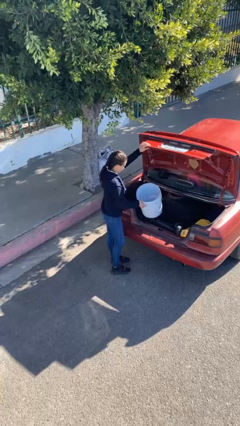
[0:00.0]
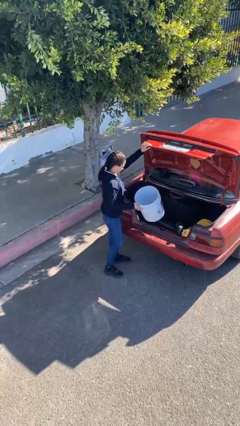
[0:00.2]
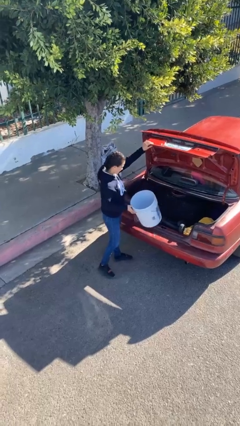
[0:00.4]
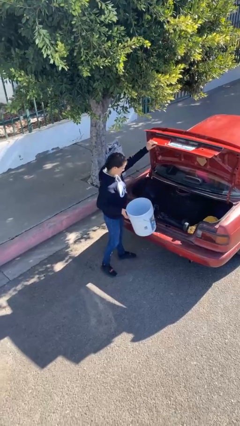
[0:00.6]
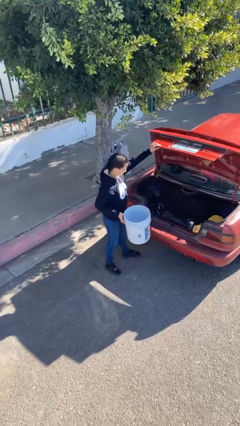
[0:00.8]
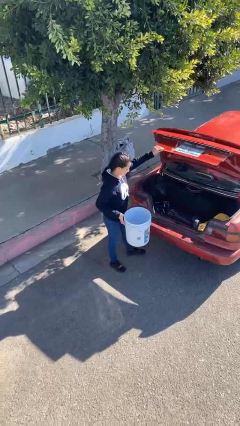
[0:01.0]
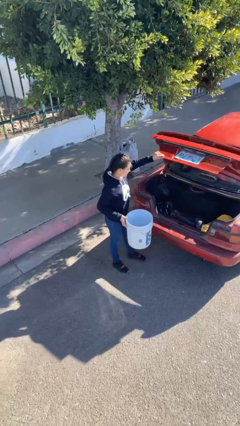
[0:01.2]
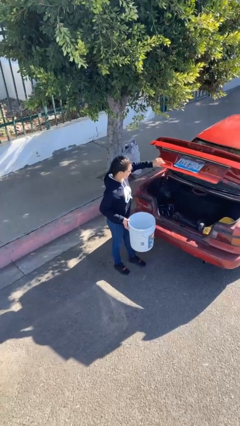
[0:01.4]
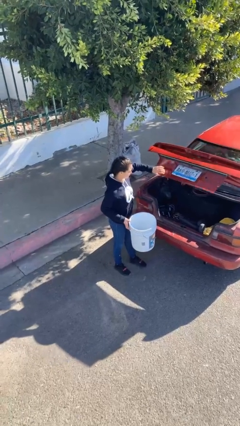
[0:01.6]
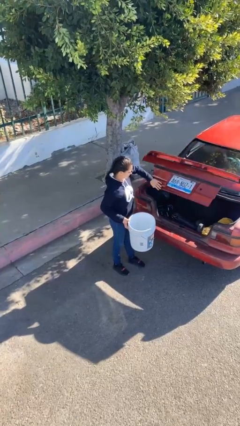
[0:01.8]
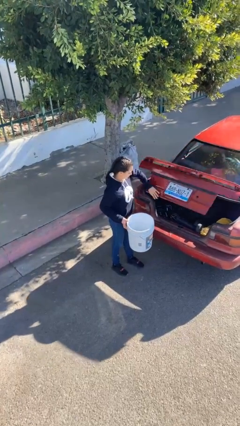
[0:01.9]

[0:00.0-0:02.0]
person unloads car

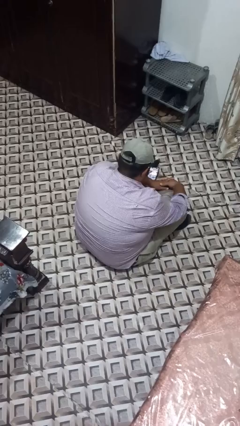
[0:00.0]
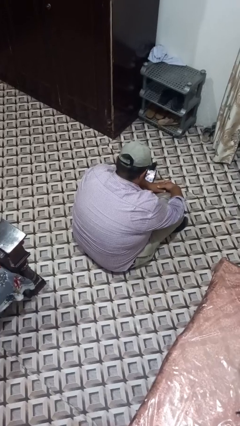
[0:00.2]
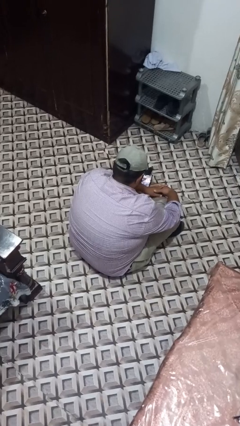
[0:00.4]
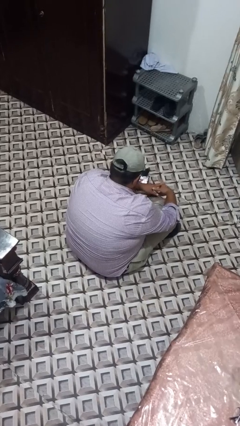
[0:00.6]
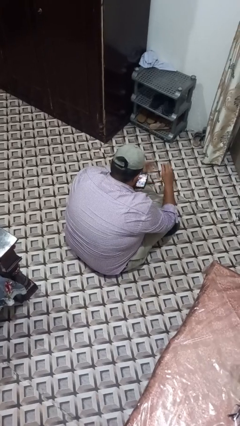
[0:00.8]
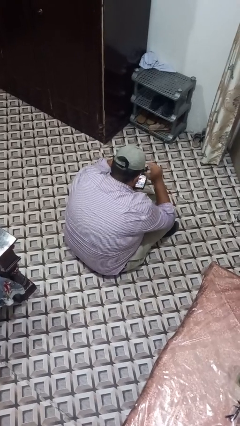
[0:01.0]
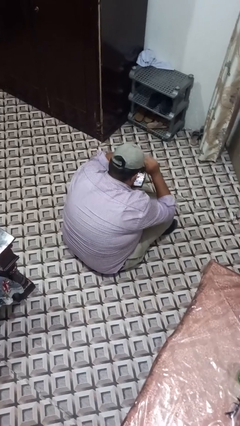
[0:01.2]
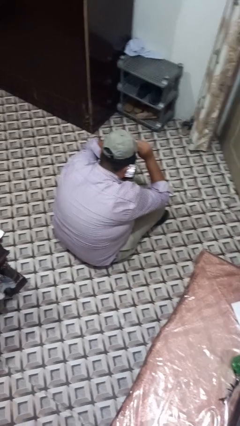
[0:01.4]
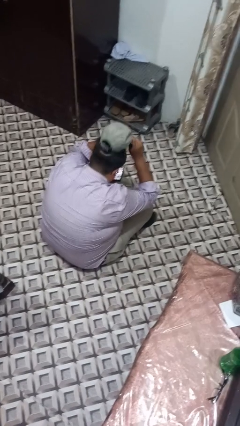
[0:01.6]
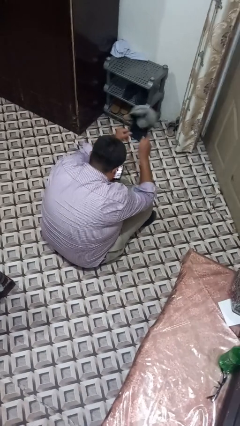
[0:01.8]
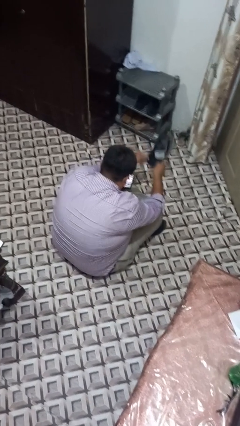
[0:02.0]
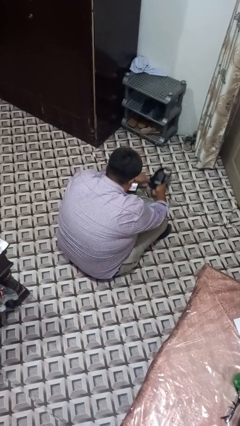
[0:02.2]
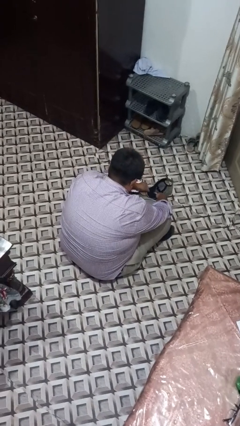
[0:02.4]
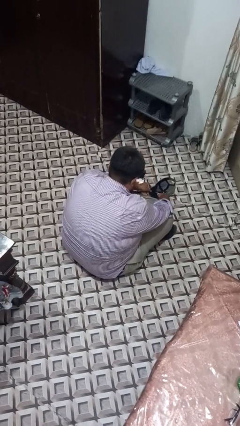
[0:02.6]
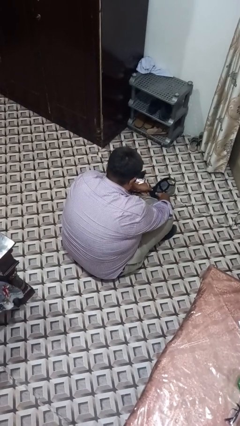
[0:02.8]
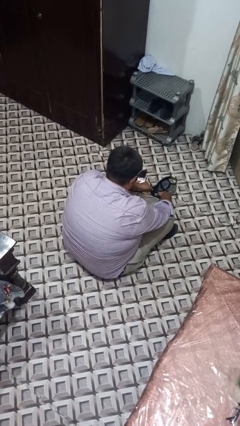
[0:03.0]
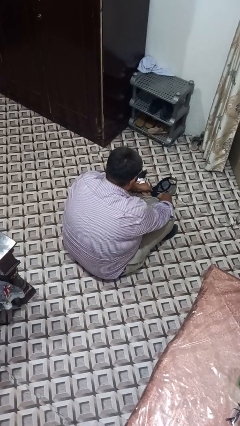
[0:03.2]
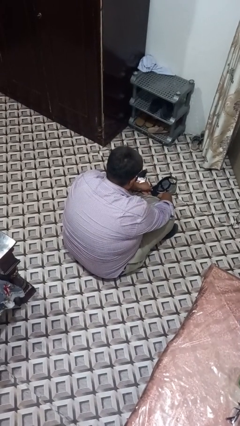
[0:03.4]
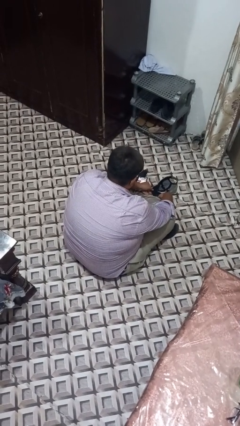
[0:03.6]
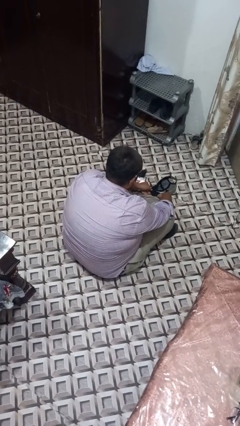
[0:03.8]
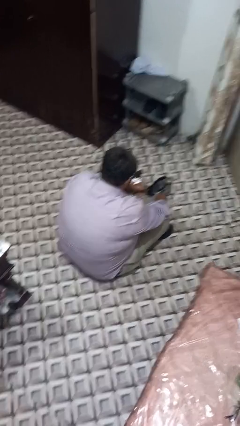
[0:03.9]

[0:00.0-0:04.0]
person takes off hat

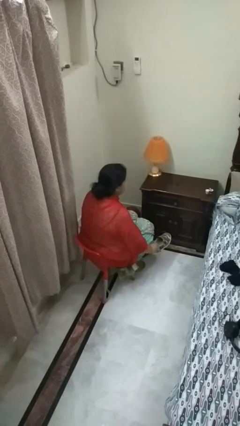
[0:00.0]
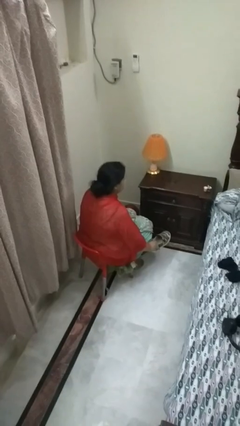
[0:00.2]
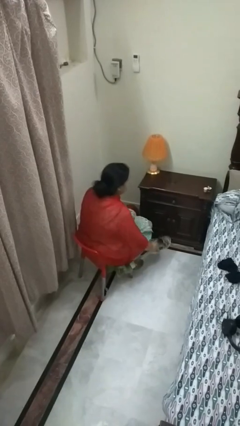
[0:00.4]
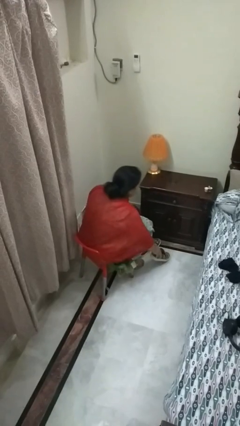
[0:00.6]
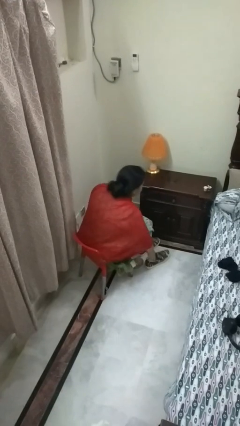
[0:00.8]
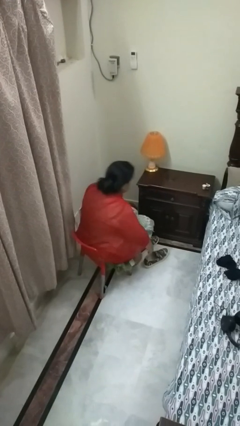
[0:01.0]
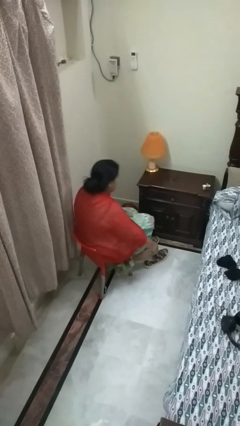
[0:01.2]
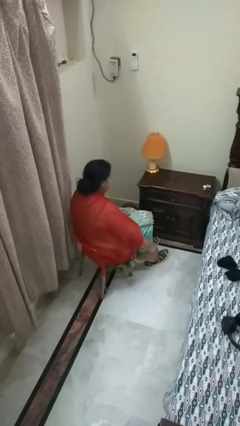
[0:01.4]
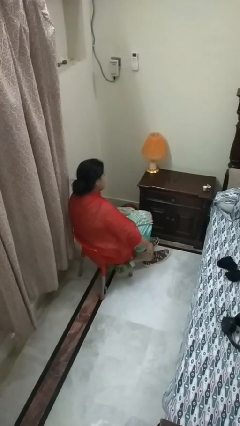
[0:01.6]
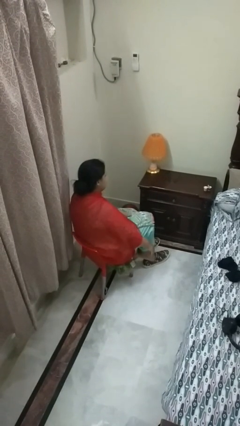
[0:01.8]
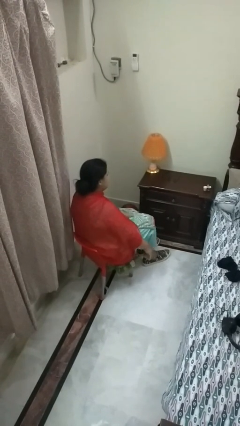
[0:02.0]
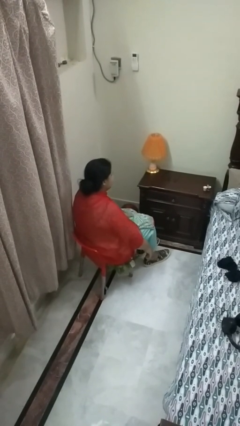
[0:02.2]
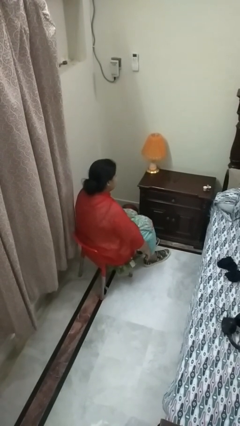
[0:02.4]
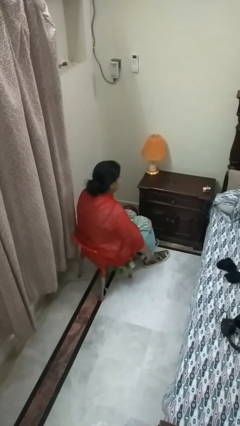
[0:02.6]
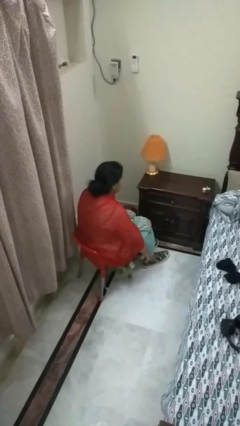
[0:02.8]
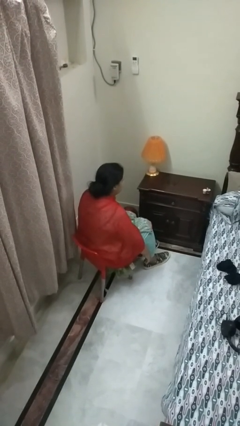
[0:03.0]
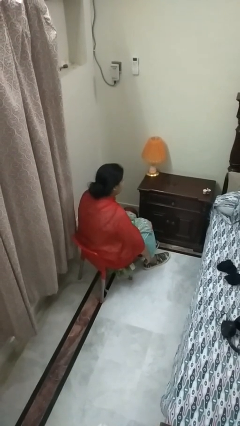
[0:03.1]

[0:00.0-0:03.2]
person puts on shoes

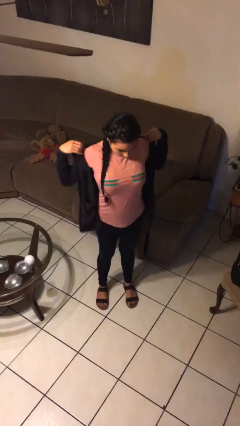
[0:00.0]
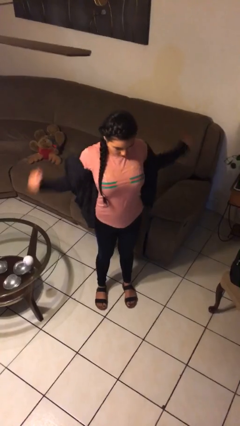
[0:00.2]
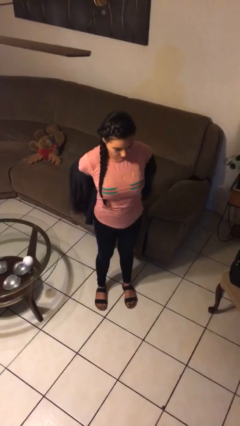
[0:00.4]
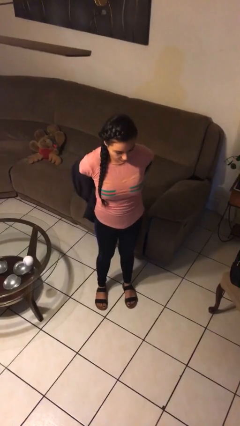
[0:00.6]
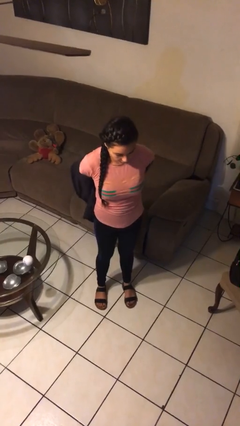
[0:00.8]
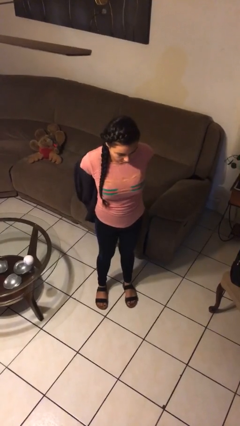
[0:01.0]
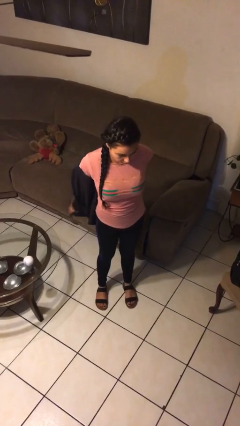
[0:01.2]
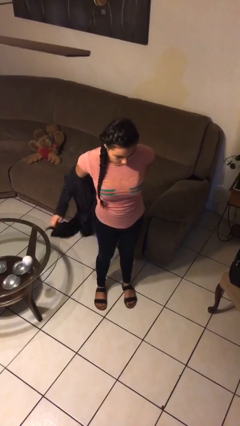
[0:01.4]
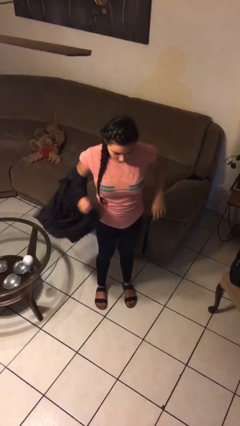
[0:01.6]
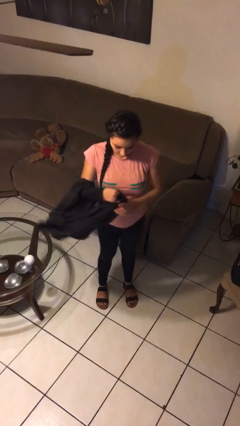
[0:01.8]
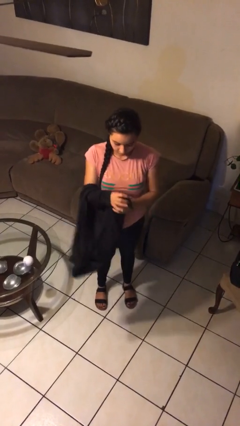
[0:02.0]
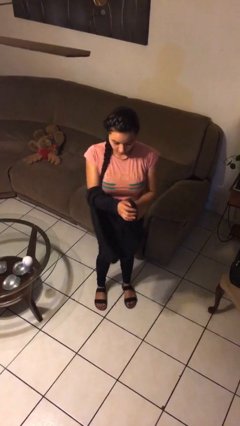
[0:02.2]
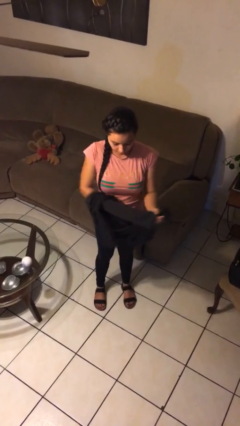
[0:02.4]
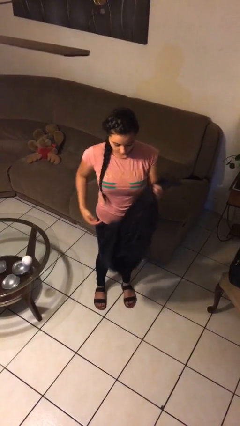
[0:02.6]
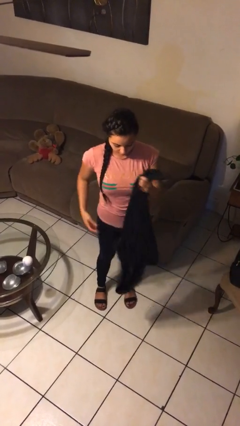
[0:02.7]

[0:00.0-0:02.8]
person takes off hoodie

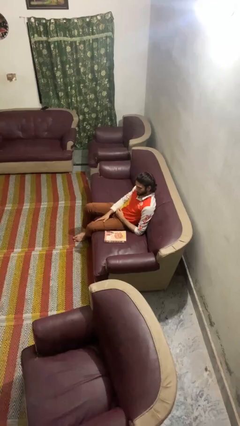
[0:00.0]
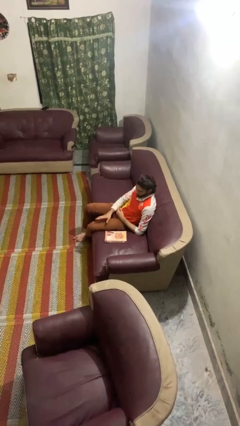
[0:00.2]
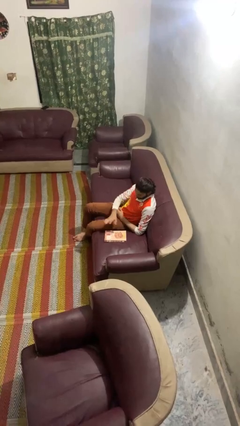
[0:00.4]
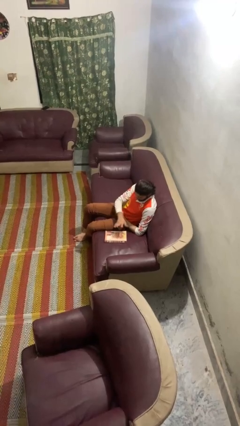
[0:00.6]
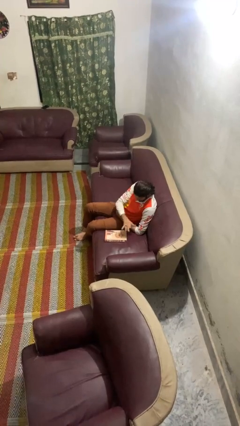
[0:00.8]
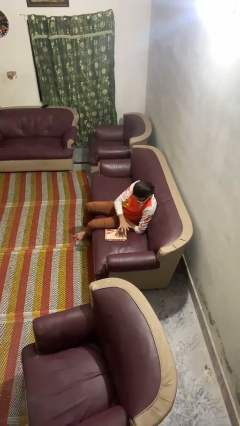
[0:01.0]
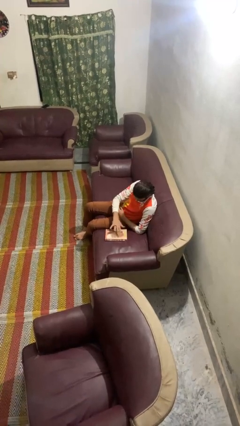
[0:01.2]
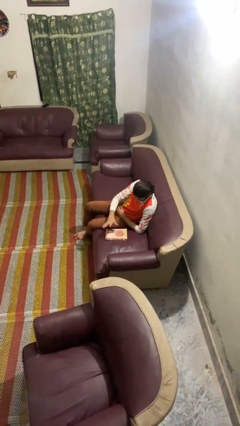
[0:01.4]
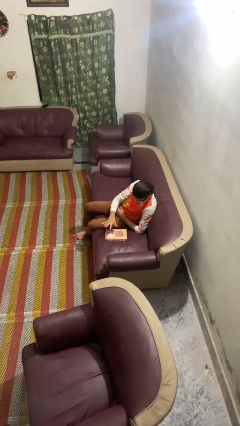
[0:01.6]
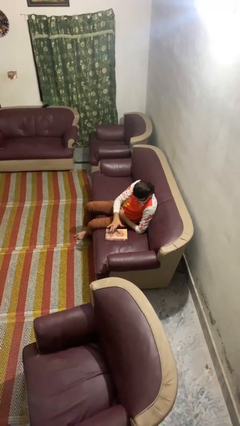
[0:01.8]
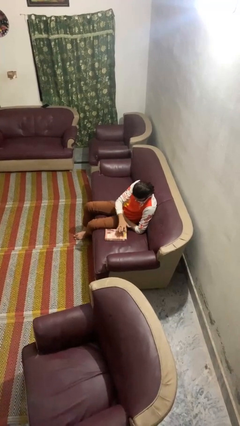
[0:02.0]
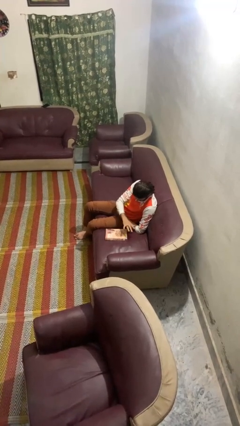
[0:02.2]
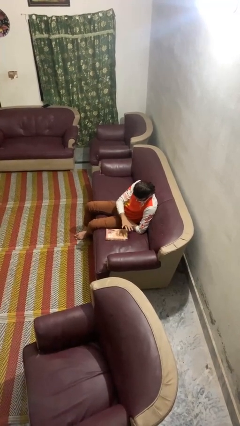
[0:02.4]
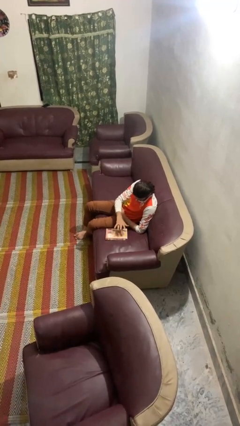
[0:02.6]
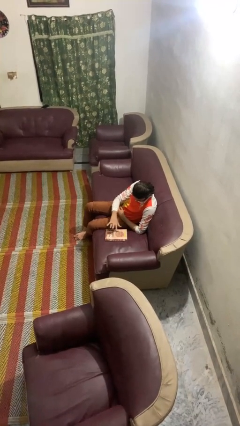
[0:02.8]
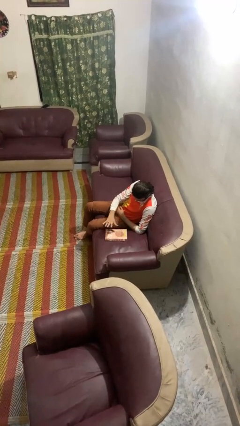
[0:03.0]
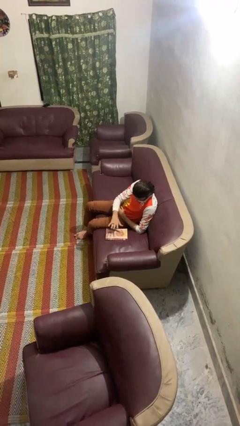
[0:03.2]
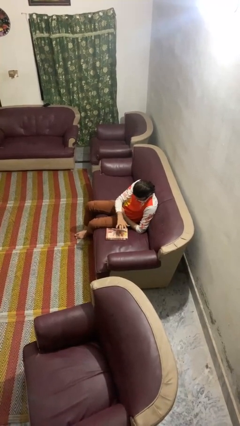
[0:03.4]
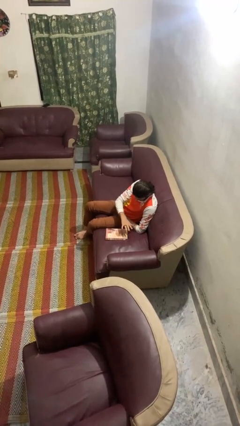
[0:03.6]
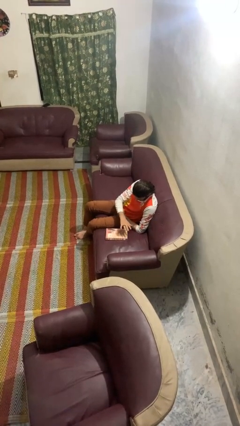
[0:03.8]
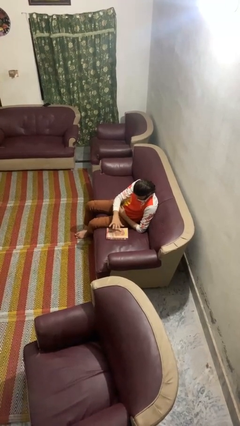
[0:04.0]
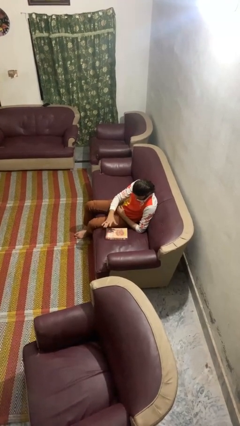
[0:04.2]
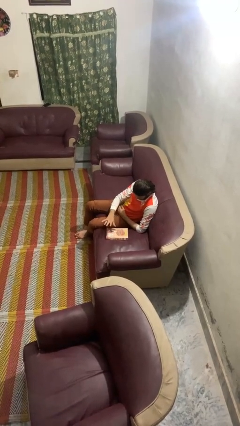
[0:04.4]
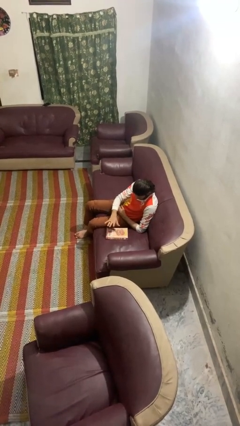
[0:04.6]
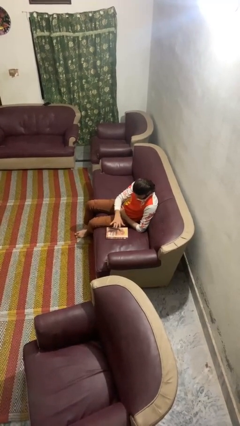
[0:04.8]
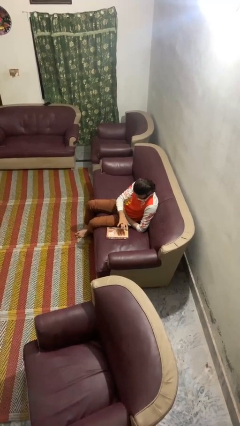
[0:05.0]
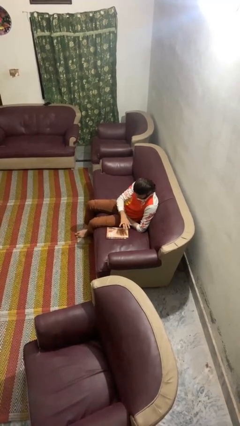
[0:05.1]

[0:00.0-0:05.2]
person waves hand over object

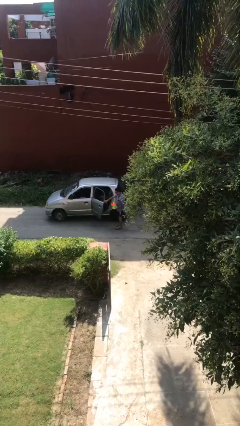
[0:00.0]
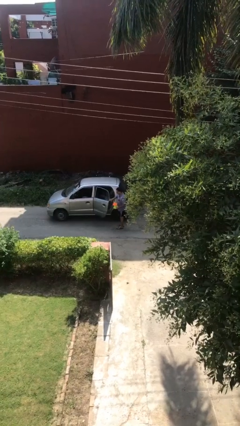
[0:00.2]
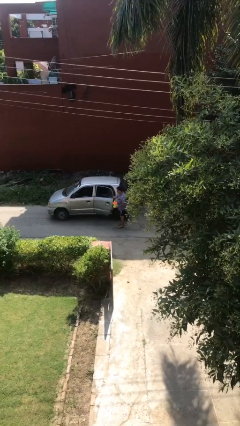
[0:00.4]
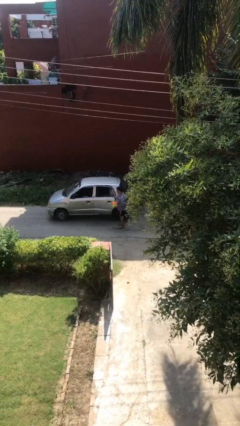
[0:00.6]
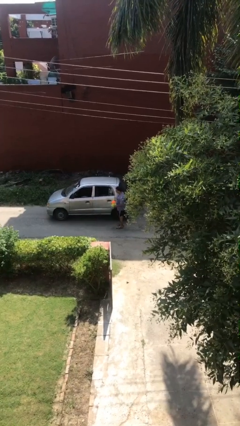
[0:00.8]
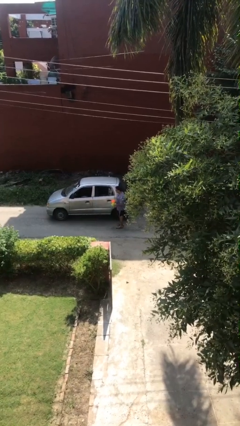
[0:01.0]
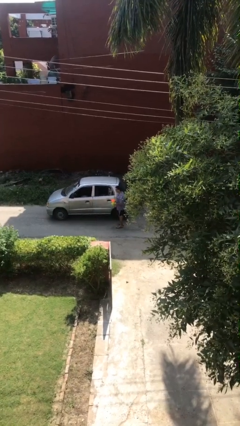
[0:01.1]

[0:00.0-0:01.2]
person closes car door
